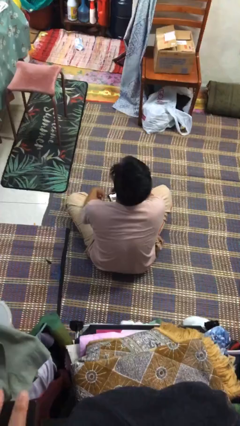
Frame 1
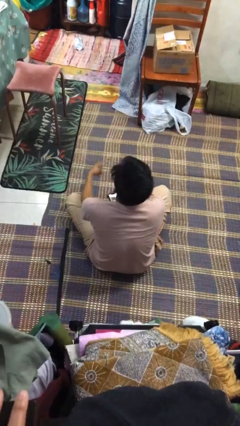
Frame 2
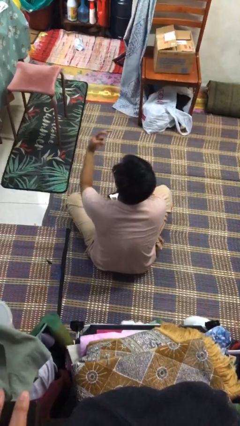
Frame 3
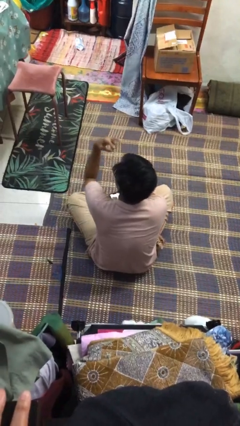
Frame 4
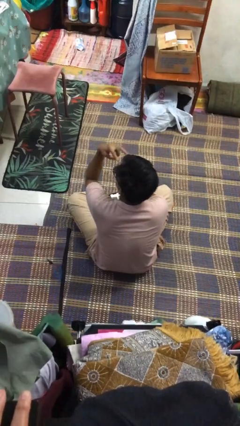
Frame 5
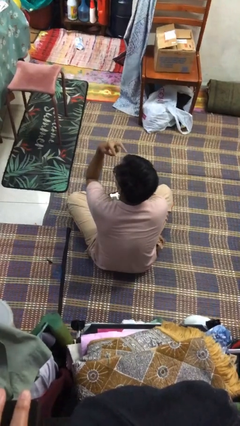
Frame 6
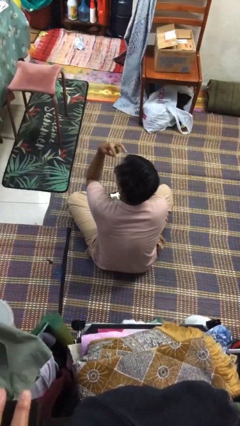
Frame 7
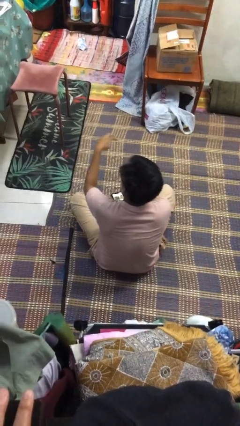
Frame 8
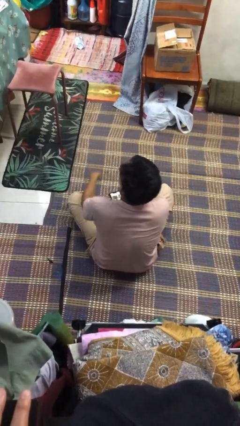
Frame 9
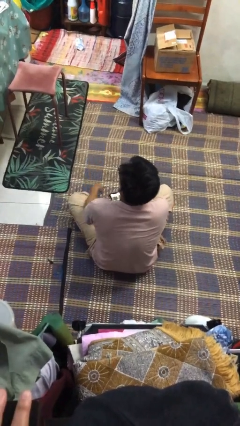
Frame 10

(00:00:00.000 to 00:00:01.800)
person gestures watch closely

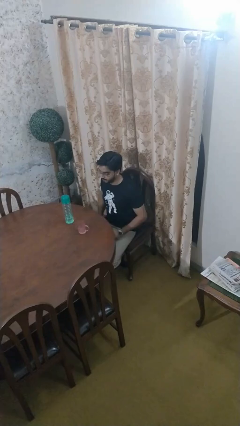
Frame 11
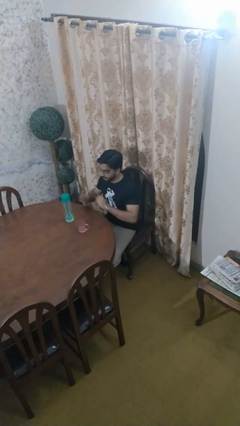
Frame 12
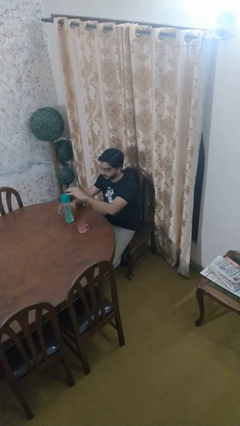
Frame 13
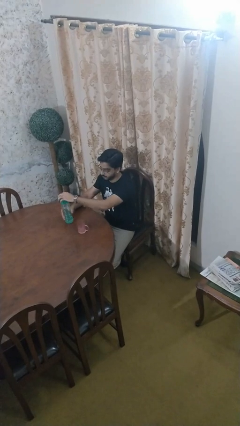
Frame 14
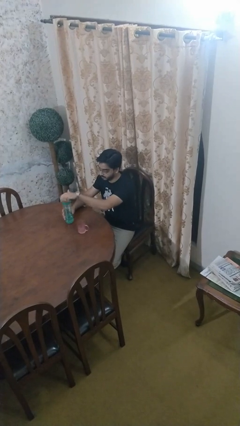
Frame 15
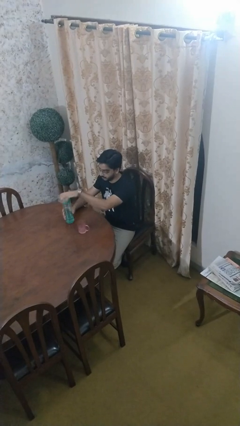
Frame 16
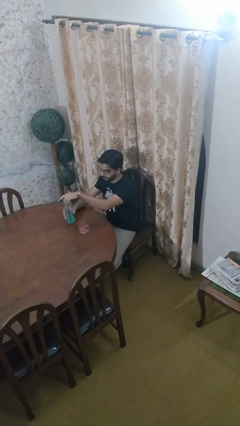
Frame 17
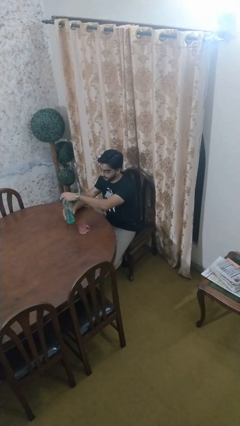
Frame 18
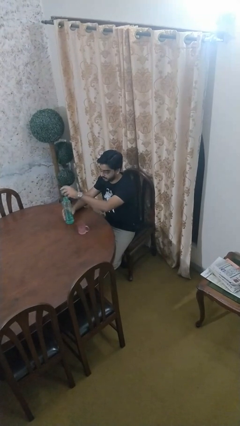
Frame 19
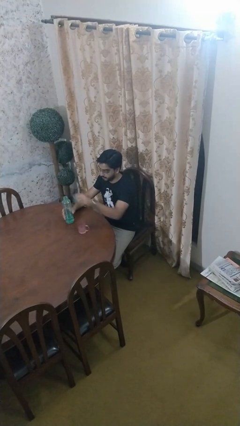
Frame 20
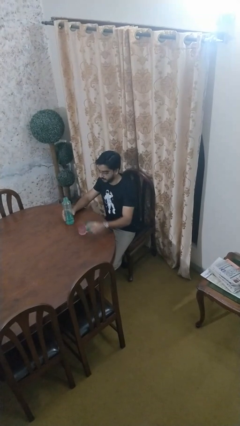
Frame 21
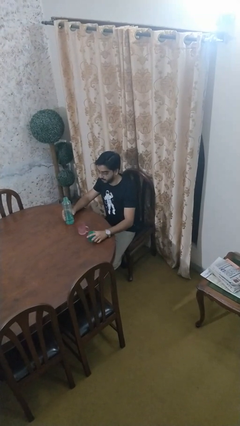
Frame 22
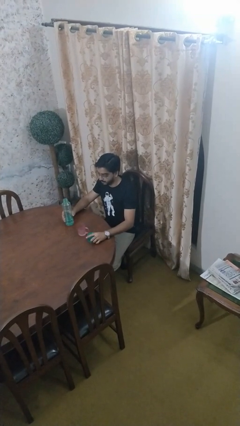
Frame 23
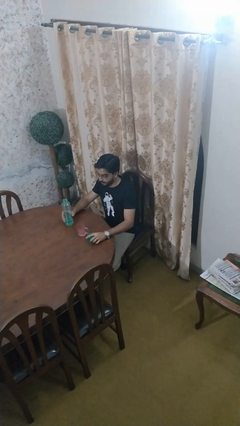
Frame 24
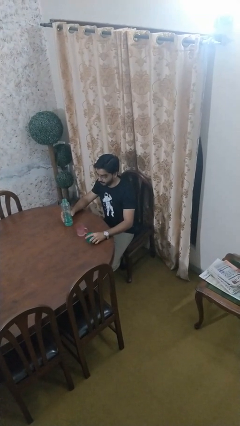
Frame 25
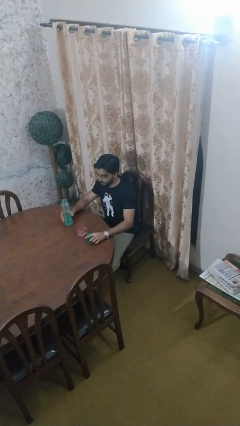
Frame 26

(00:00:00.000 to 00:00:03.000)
person unscrews lid from bottle

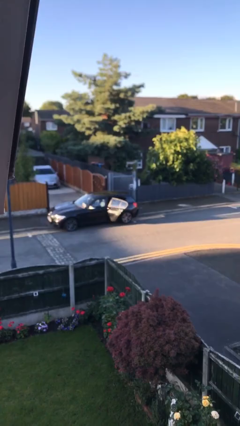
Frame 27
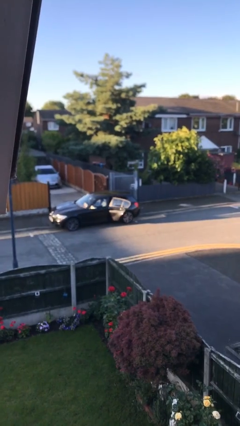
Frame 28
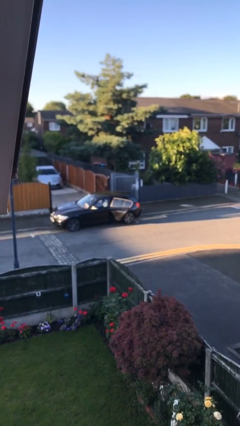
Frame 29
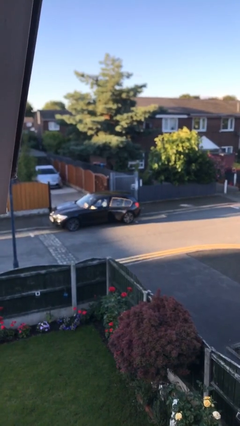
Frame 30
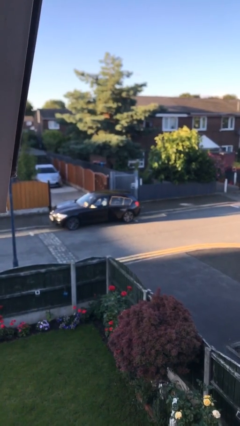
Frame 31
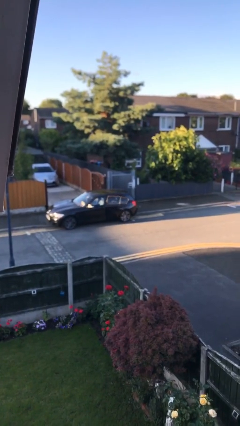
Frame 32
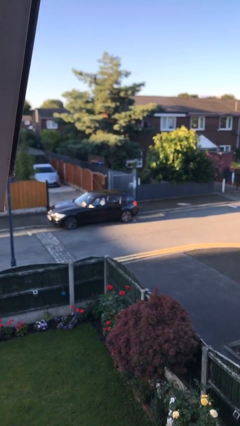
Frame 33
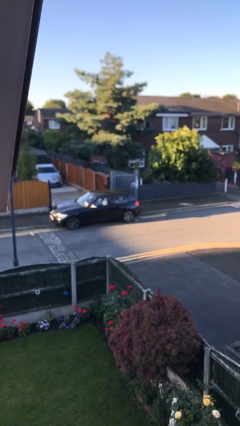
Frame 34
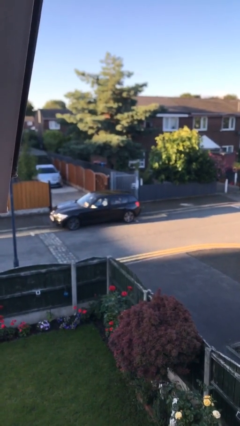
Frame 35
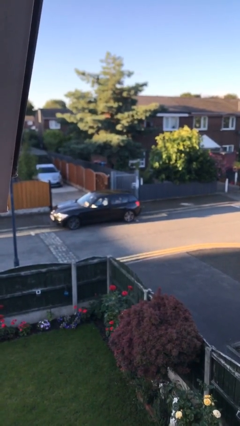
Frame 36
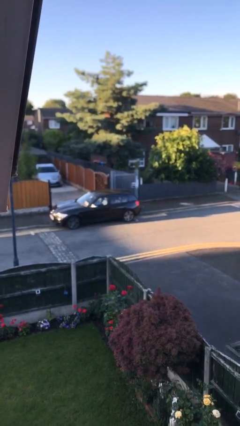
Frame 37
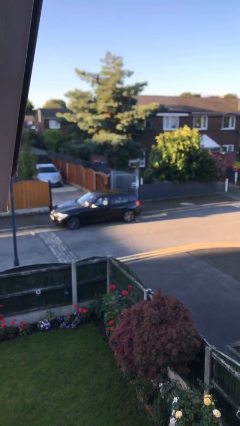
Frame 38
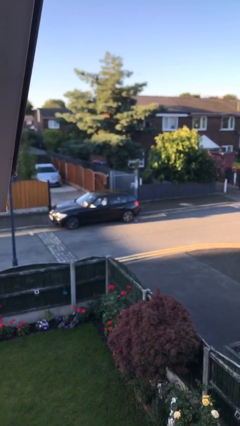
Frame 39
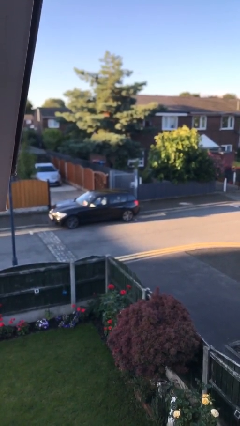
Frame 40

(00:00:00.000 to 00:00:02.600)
person closes car door

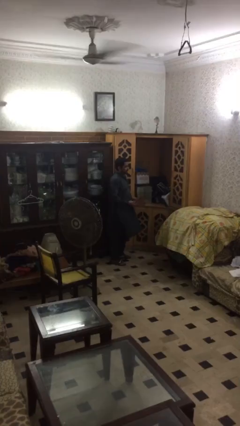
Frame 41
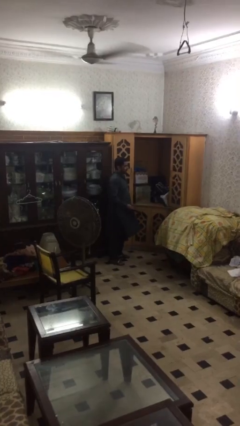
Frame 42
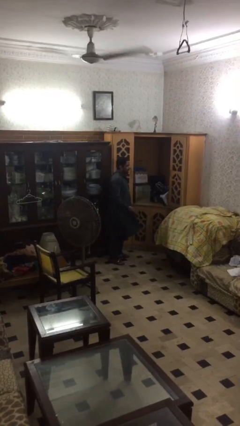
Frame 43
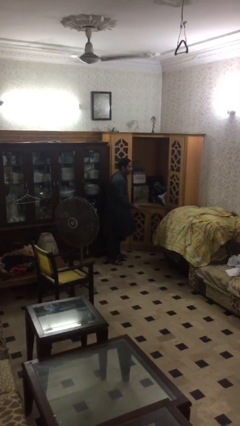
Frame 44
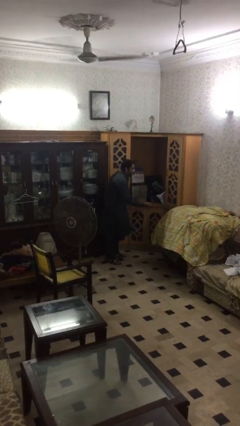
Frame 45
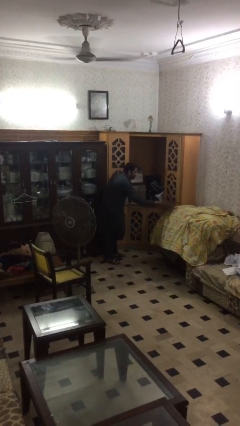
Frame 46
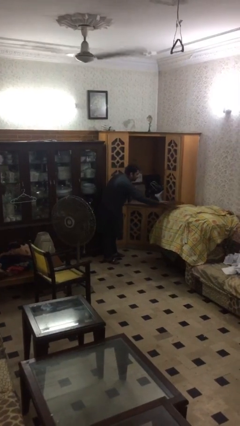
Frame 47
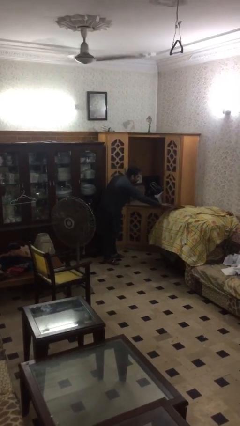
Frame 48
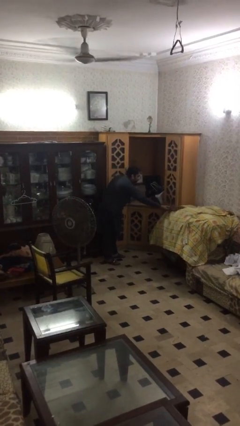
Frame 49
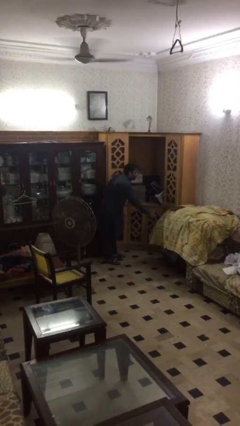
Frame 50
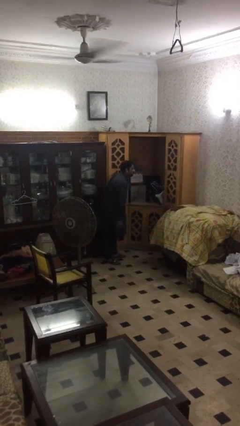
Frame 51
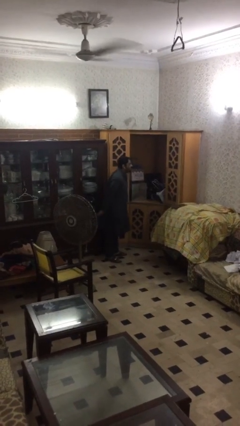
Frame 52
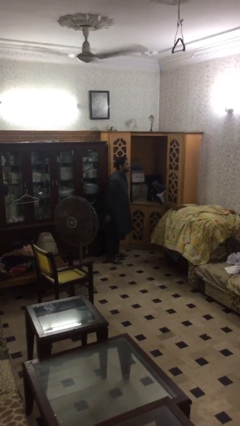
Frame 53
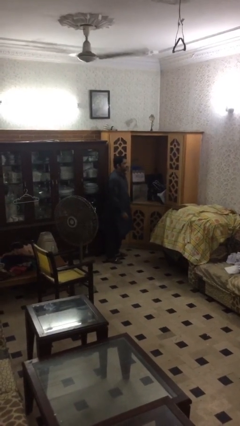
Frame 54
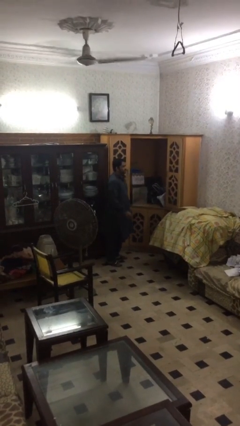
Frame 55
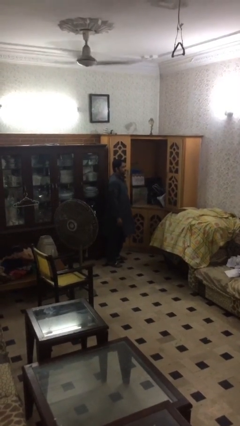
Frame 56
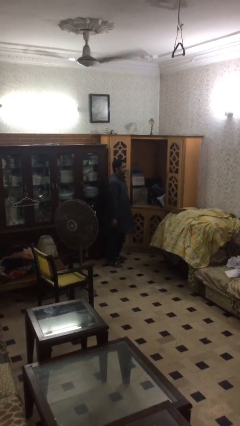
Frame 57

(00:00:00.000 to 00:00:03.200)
person puts down object on table

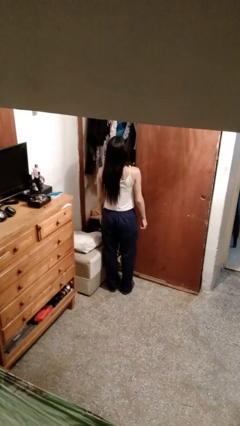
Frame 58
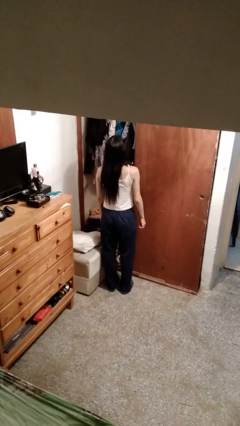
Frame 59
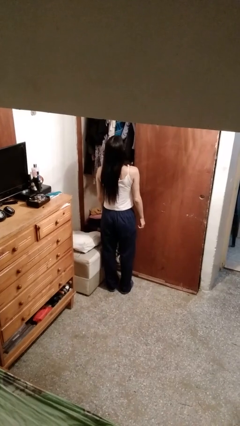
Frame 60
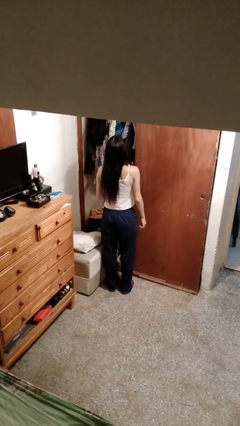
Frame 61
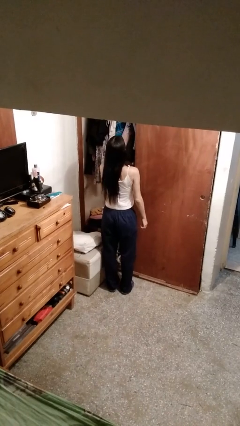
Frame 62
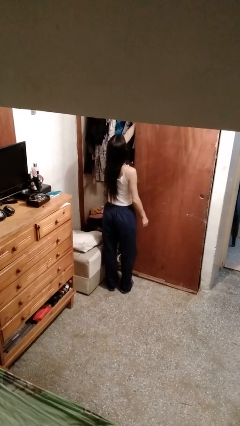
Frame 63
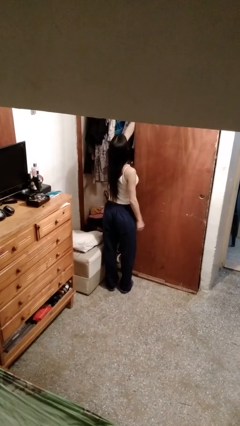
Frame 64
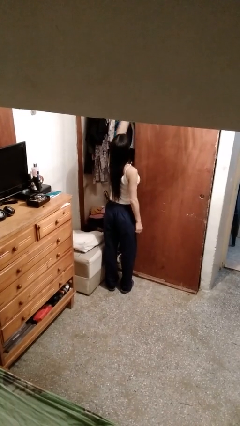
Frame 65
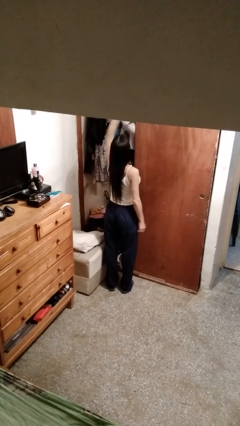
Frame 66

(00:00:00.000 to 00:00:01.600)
person takes clothes from closet

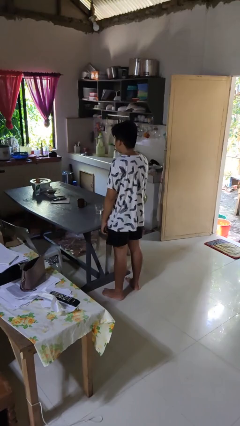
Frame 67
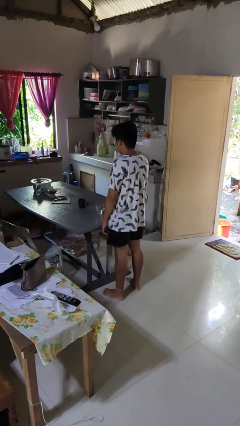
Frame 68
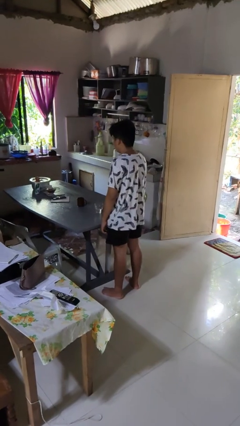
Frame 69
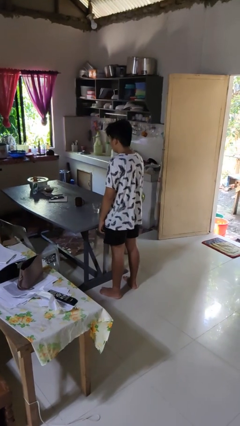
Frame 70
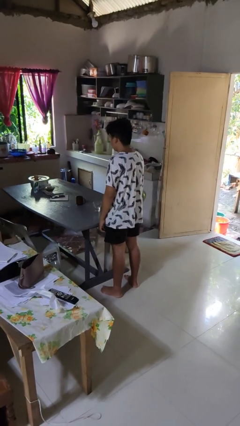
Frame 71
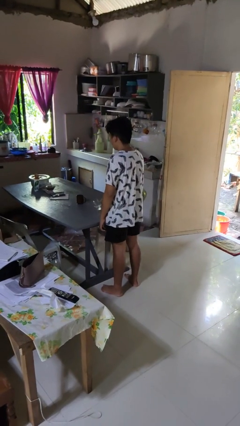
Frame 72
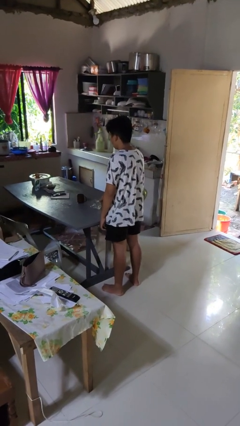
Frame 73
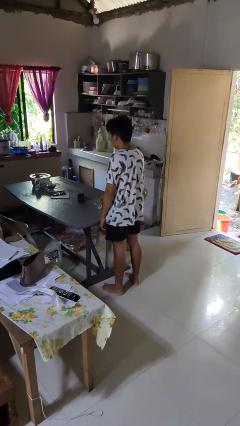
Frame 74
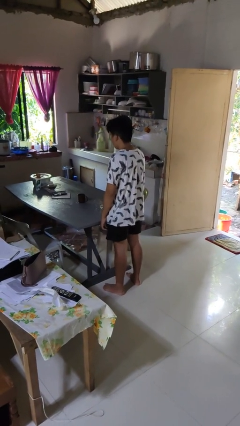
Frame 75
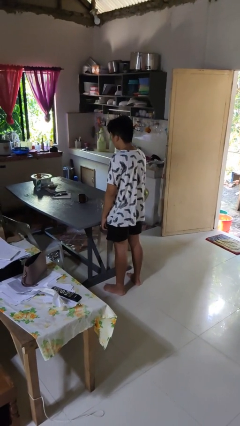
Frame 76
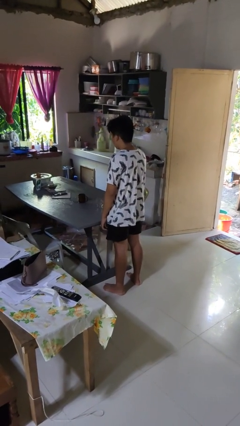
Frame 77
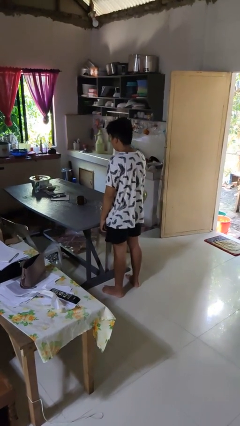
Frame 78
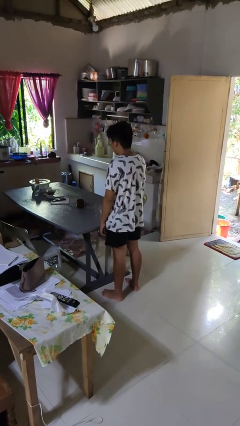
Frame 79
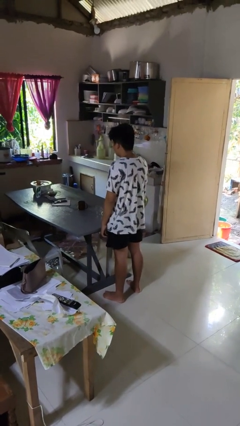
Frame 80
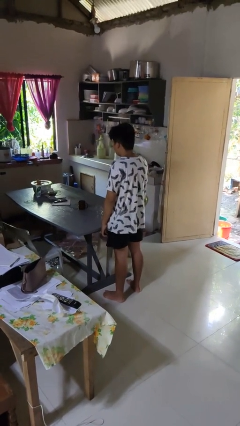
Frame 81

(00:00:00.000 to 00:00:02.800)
person spills on table
